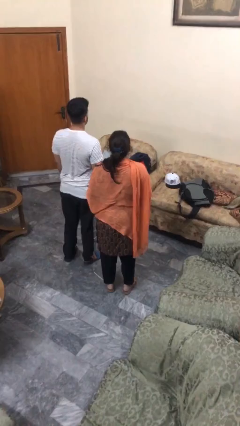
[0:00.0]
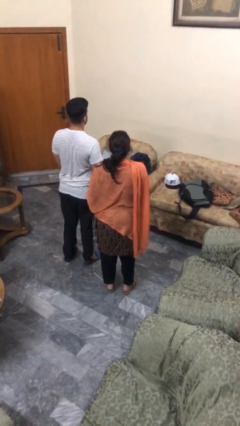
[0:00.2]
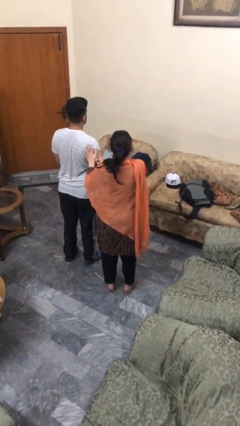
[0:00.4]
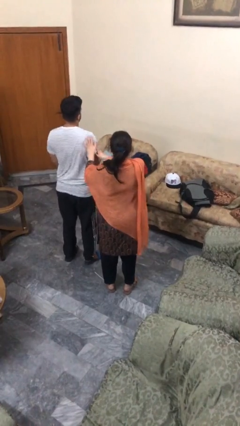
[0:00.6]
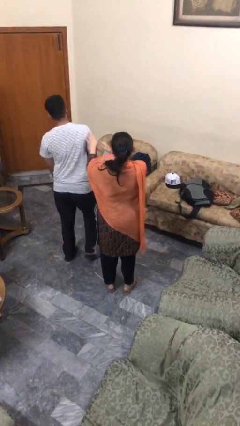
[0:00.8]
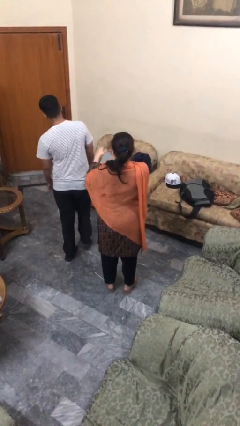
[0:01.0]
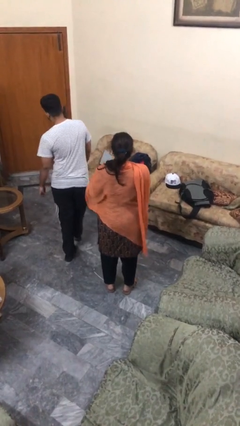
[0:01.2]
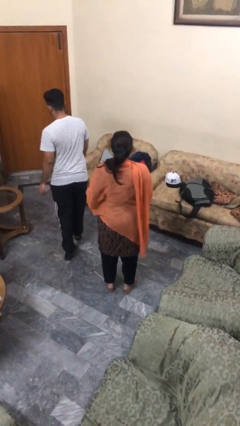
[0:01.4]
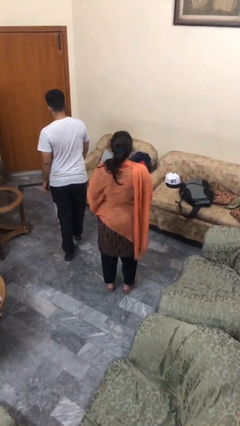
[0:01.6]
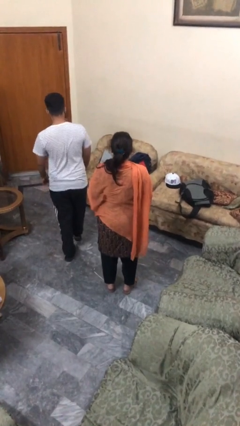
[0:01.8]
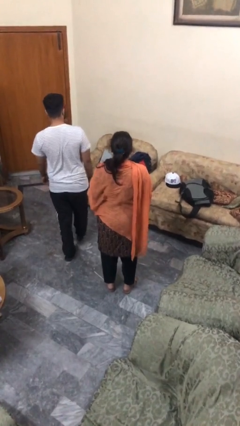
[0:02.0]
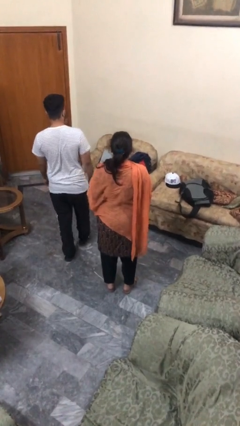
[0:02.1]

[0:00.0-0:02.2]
person shoves person

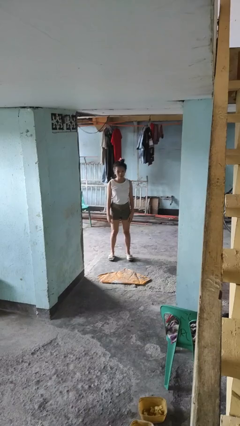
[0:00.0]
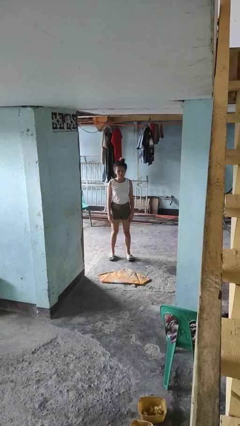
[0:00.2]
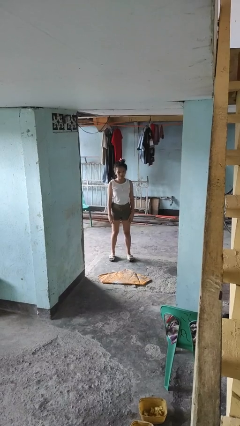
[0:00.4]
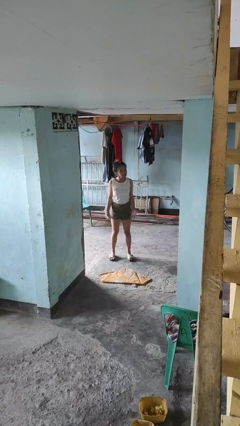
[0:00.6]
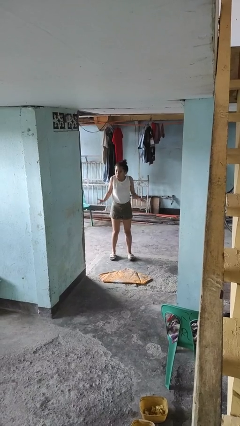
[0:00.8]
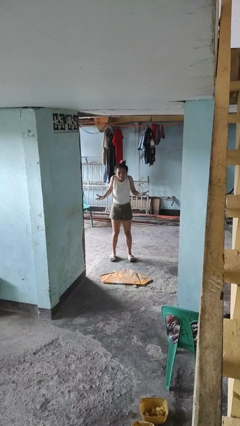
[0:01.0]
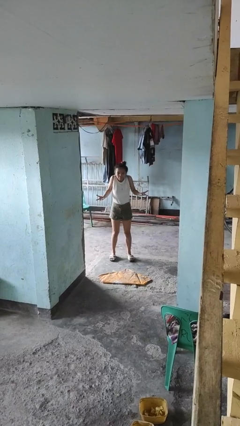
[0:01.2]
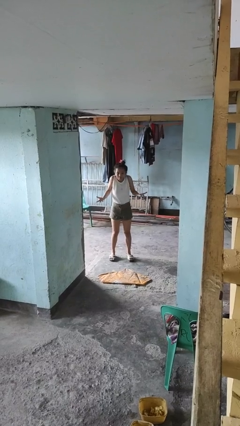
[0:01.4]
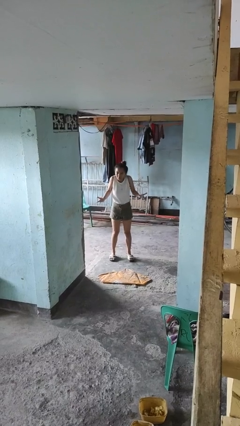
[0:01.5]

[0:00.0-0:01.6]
person shrugs

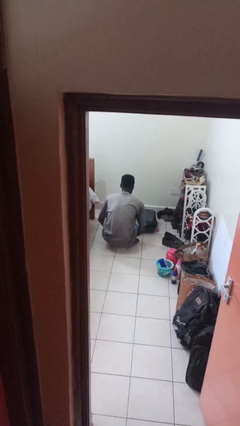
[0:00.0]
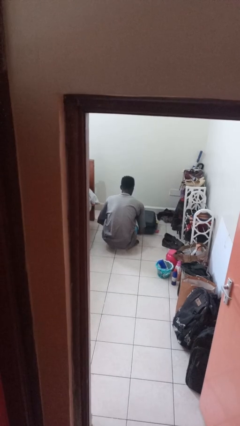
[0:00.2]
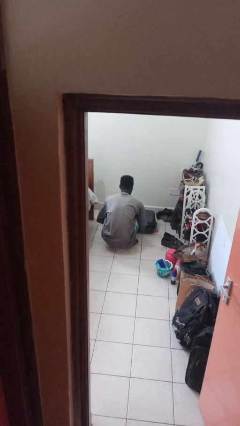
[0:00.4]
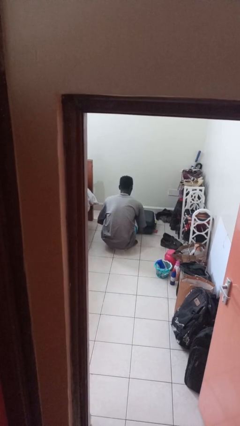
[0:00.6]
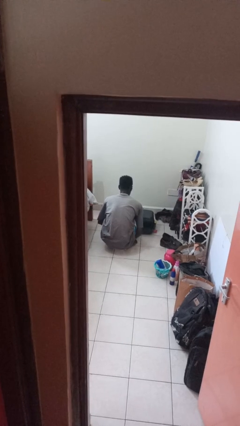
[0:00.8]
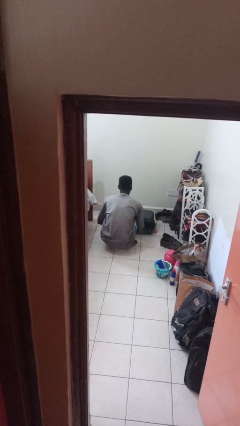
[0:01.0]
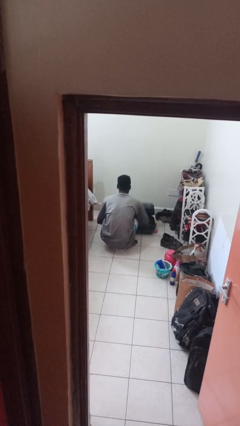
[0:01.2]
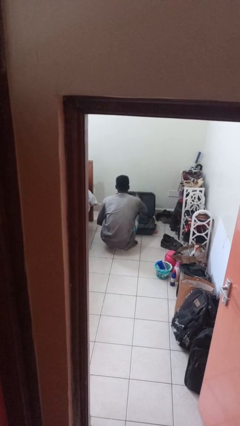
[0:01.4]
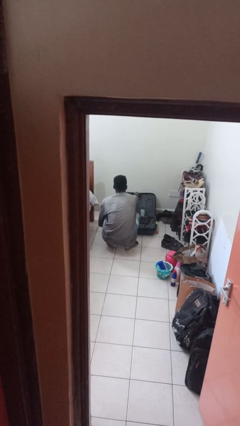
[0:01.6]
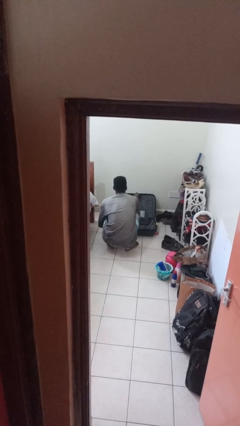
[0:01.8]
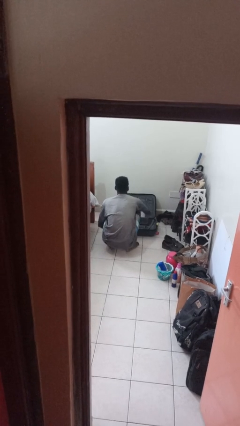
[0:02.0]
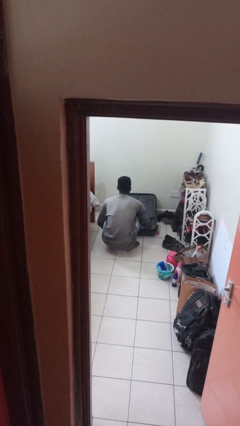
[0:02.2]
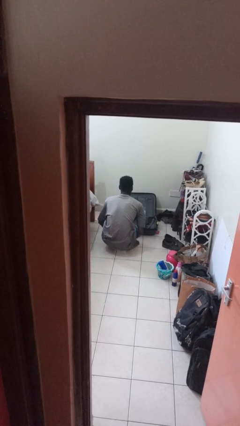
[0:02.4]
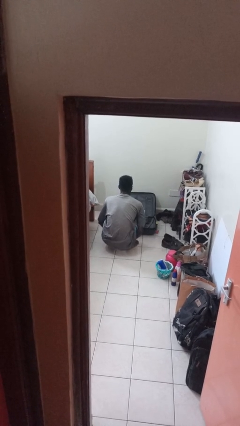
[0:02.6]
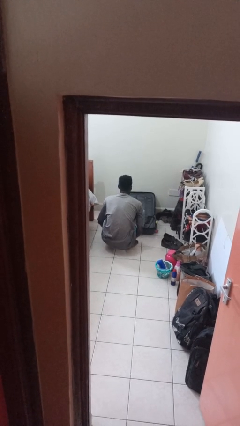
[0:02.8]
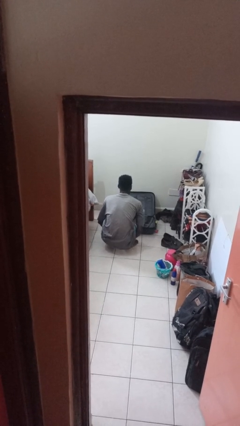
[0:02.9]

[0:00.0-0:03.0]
person opens suitcase

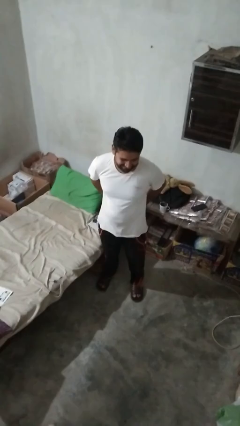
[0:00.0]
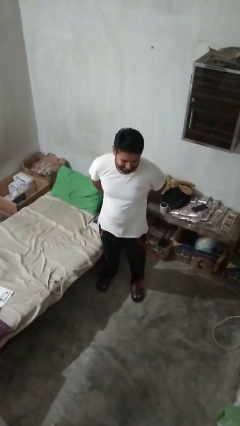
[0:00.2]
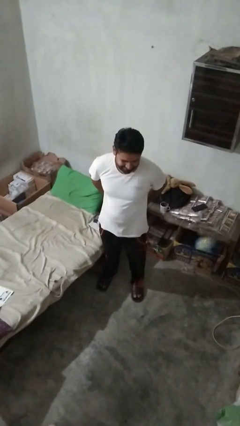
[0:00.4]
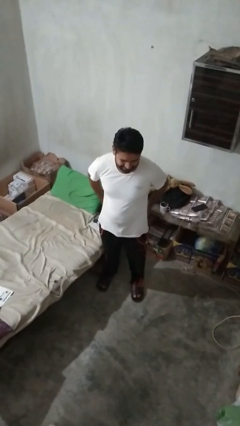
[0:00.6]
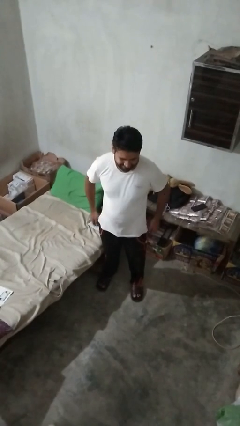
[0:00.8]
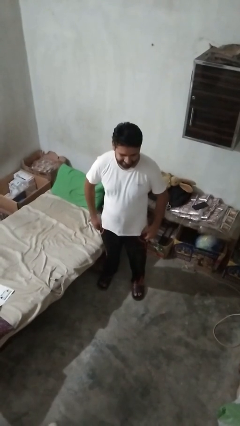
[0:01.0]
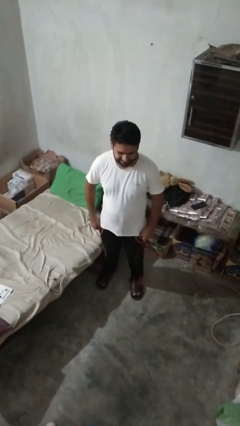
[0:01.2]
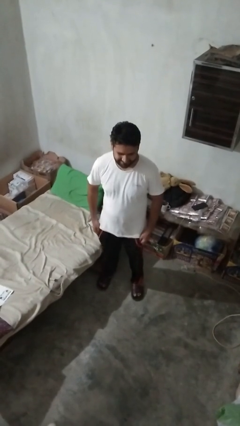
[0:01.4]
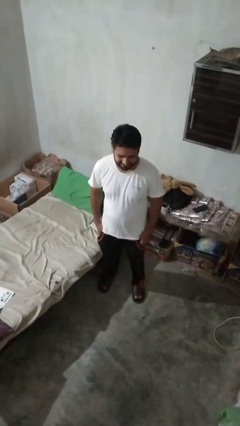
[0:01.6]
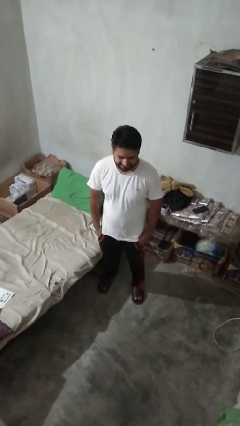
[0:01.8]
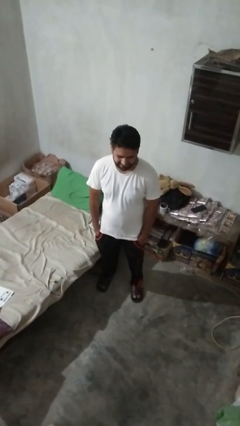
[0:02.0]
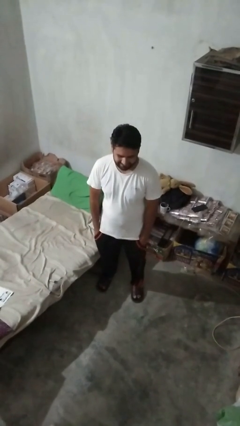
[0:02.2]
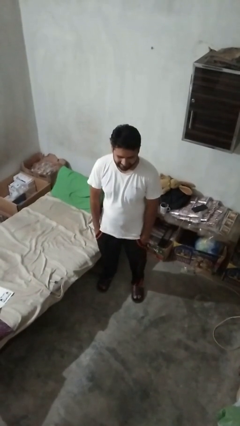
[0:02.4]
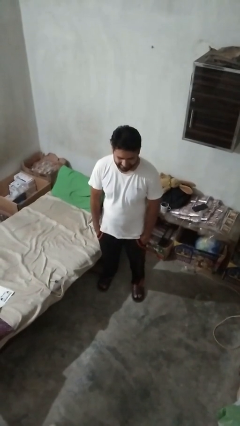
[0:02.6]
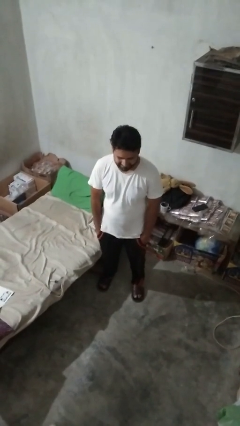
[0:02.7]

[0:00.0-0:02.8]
person puts hands in back pockets

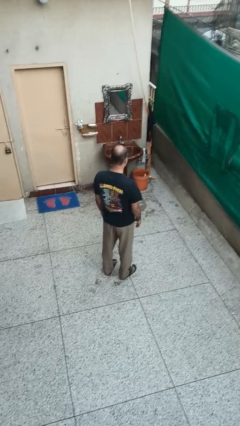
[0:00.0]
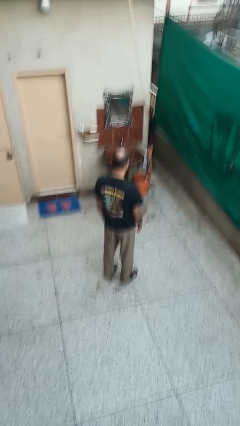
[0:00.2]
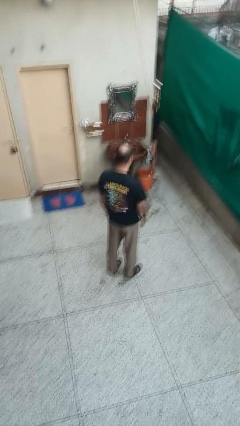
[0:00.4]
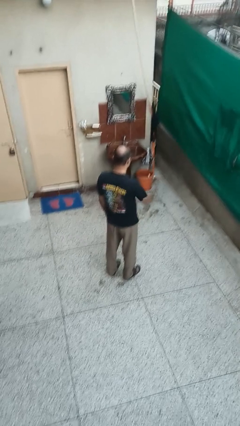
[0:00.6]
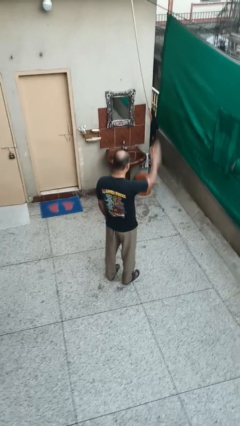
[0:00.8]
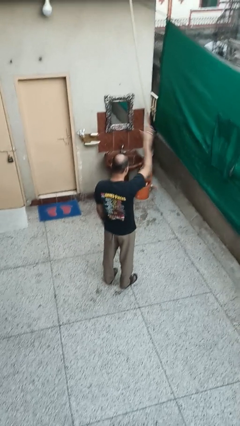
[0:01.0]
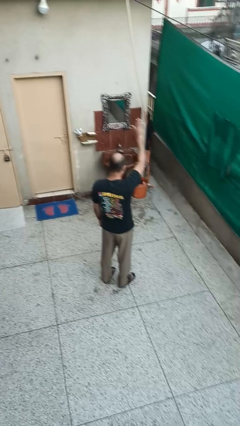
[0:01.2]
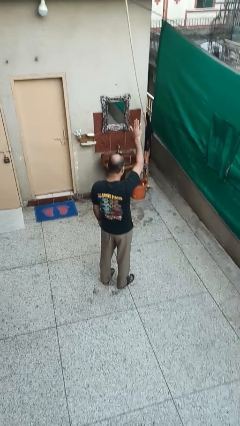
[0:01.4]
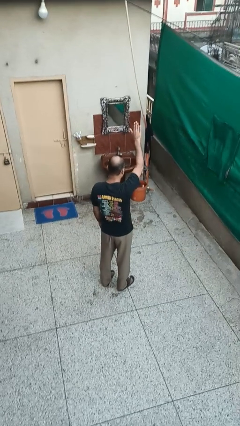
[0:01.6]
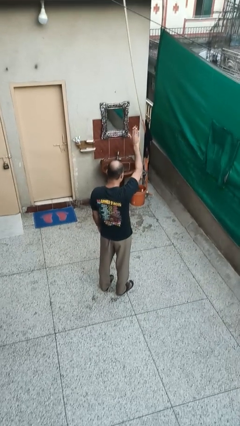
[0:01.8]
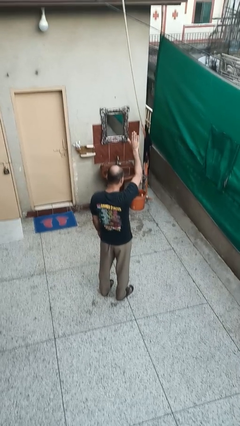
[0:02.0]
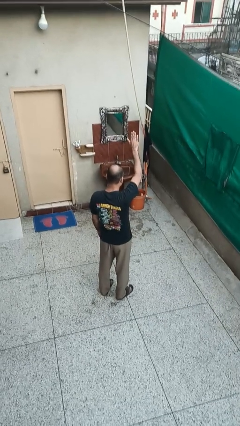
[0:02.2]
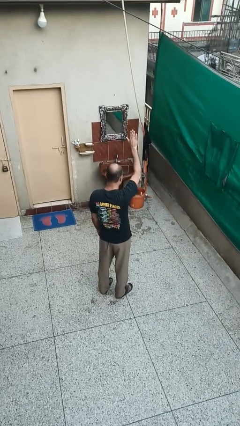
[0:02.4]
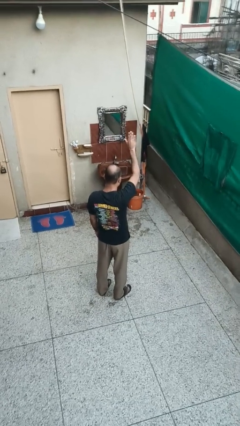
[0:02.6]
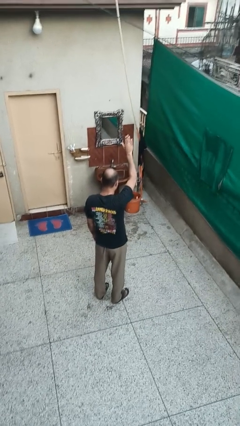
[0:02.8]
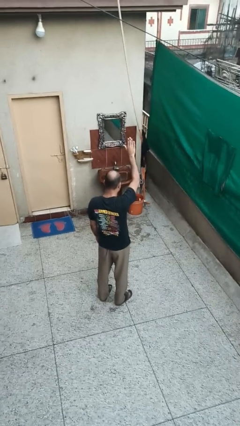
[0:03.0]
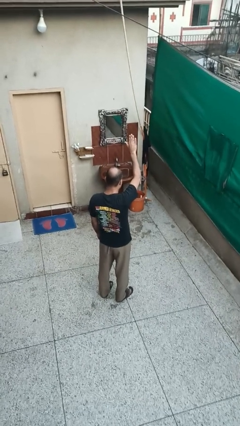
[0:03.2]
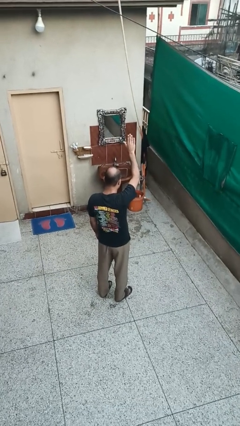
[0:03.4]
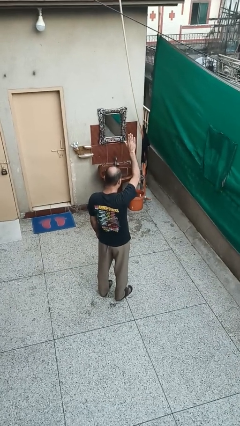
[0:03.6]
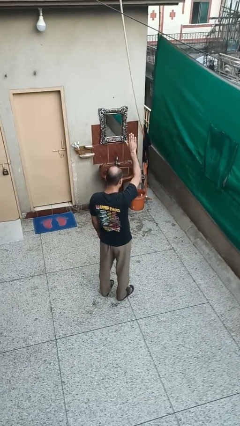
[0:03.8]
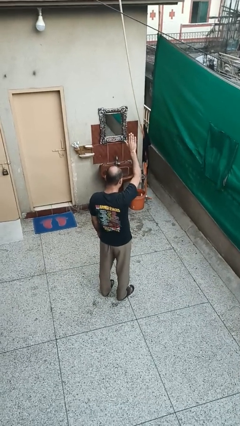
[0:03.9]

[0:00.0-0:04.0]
person gestures raise hand

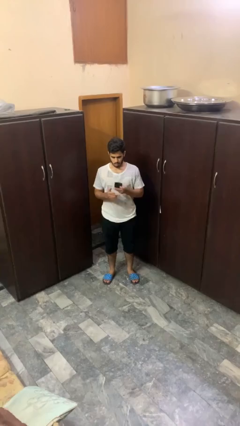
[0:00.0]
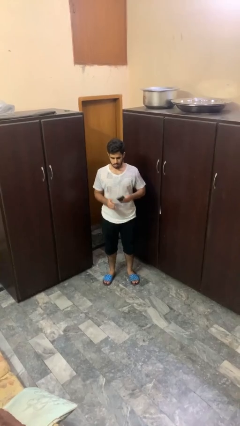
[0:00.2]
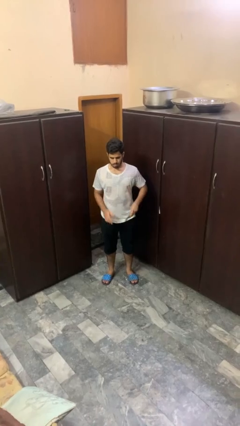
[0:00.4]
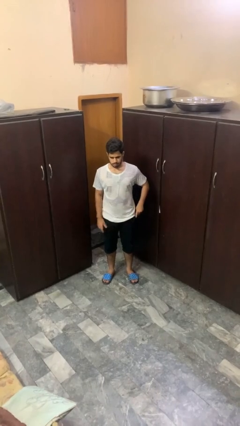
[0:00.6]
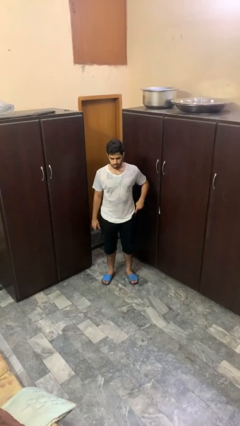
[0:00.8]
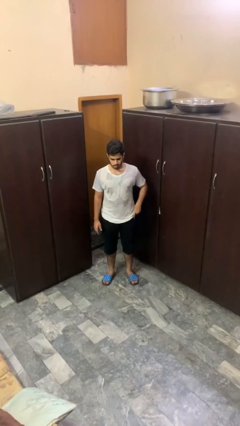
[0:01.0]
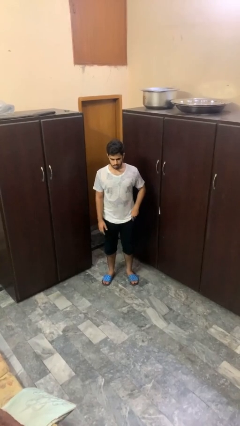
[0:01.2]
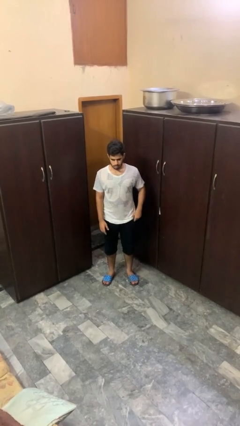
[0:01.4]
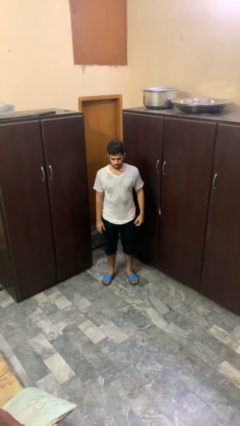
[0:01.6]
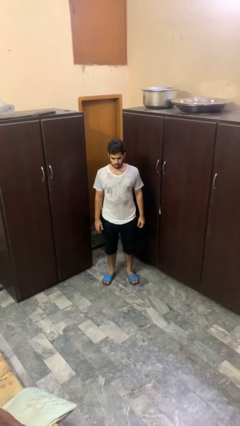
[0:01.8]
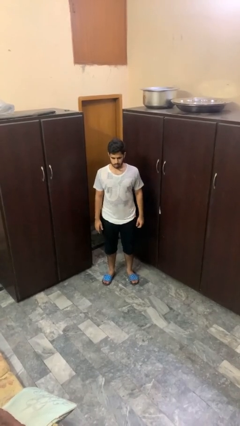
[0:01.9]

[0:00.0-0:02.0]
person puts phone into pocket

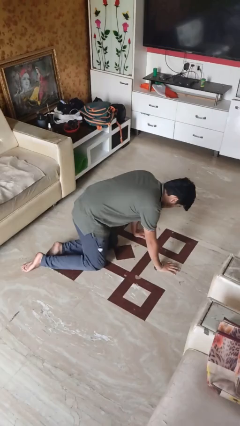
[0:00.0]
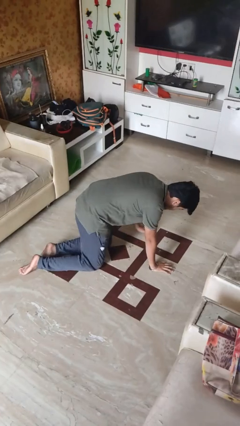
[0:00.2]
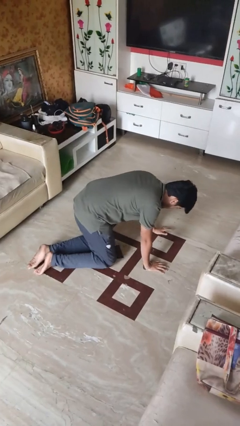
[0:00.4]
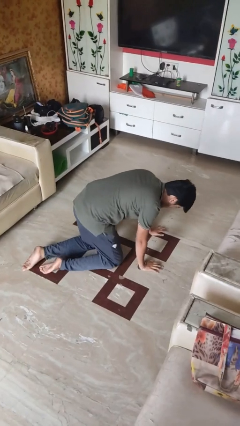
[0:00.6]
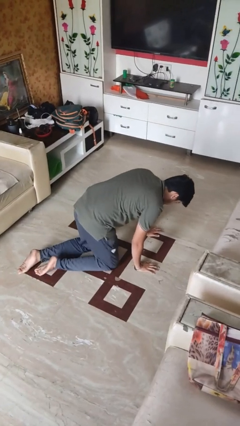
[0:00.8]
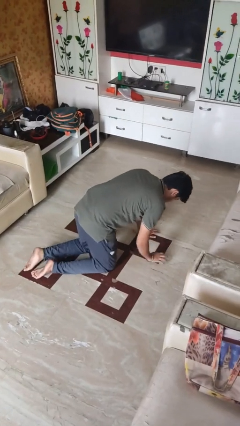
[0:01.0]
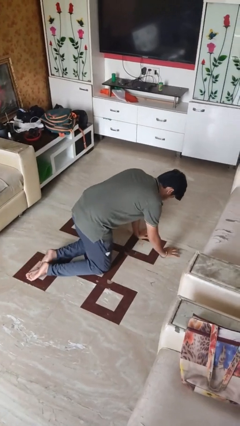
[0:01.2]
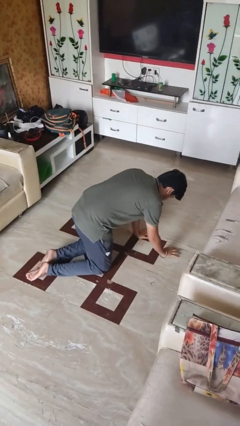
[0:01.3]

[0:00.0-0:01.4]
person crawls
